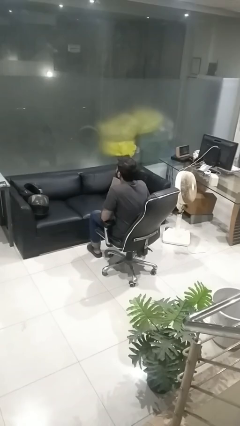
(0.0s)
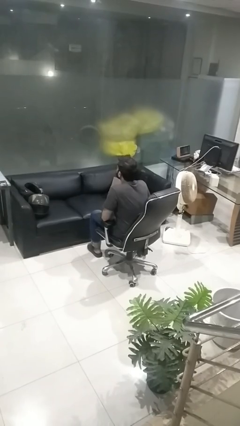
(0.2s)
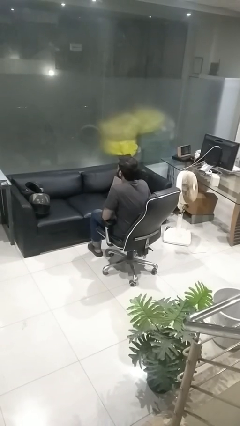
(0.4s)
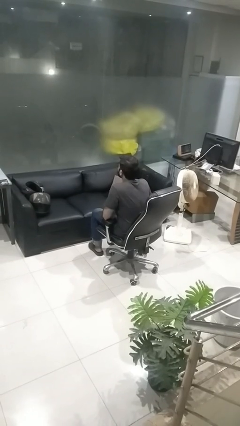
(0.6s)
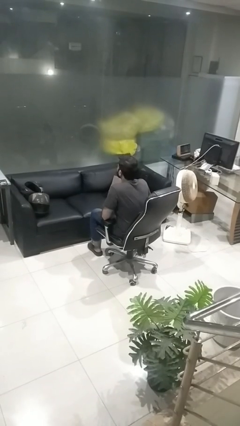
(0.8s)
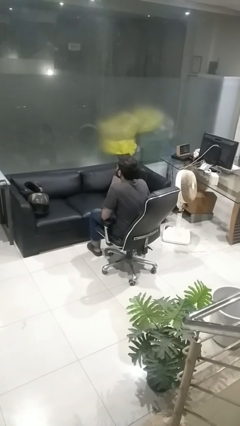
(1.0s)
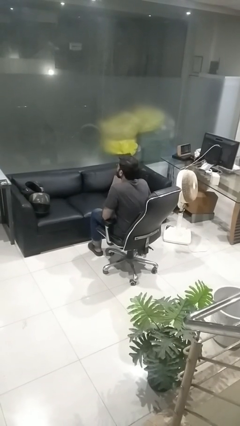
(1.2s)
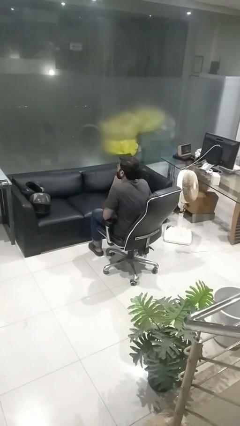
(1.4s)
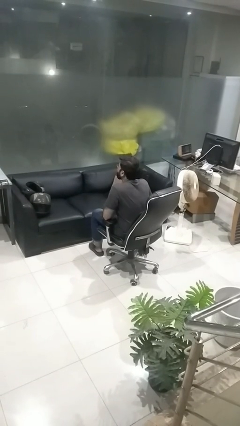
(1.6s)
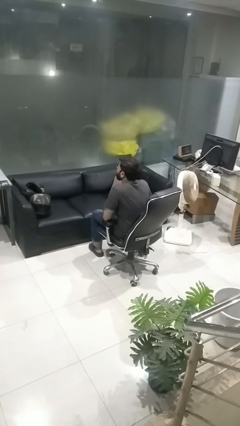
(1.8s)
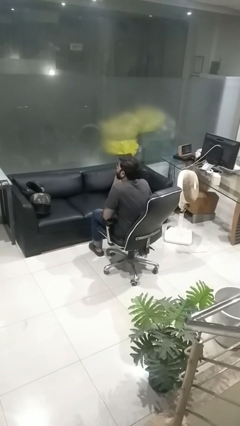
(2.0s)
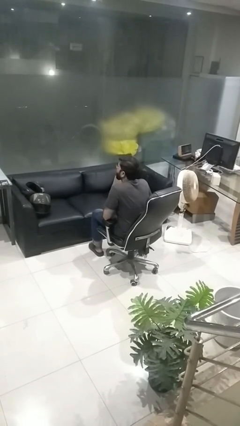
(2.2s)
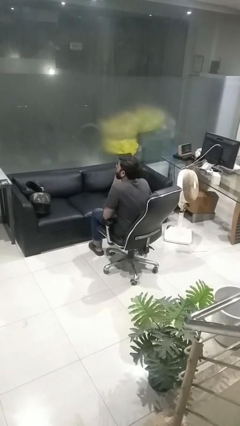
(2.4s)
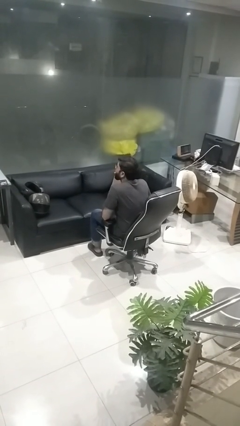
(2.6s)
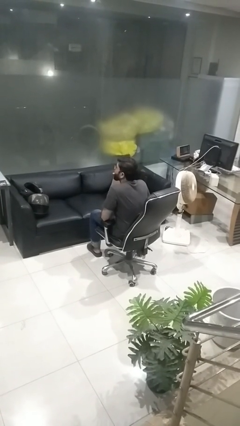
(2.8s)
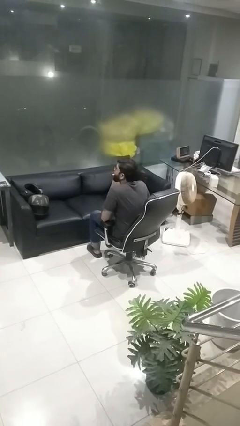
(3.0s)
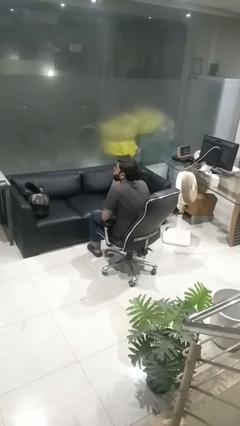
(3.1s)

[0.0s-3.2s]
person sticks out tongue

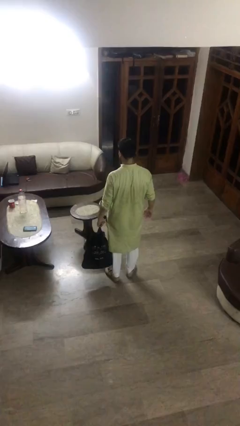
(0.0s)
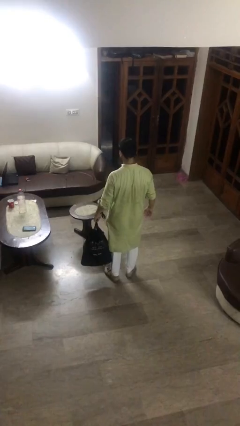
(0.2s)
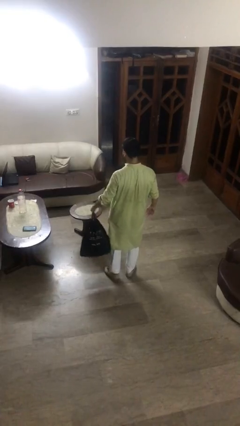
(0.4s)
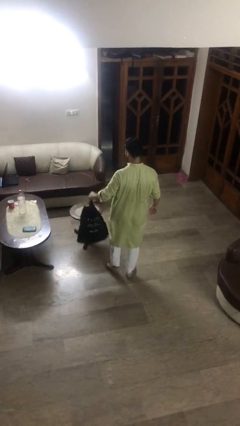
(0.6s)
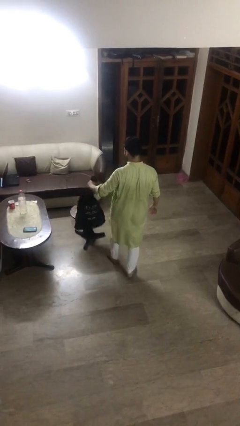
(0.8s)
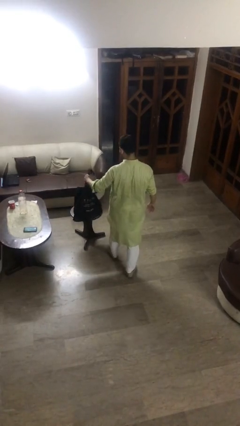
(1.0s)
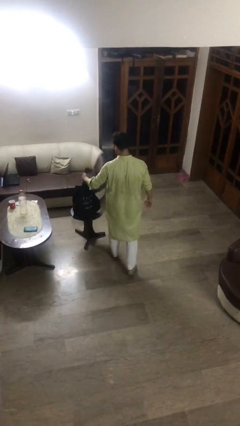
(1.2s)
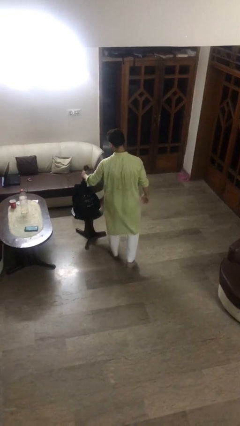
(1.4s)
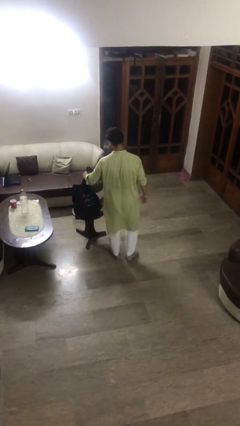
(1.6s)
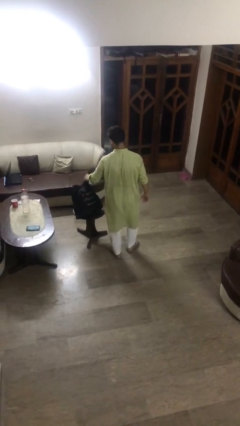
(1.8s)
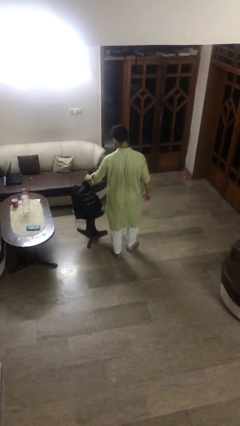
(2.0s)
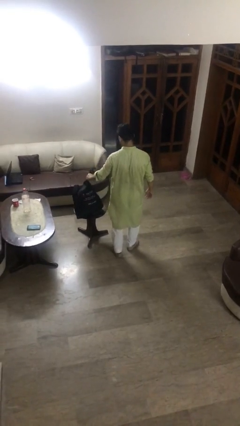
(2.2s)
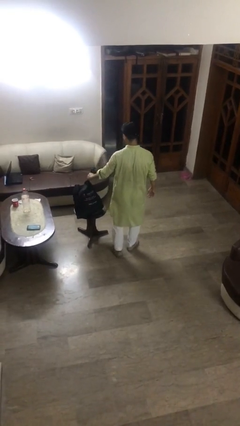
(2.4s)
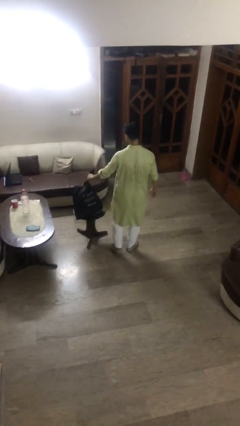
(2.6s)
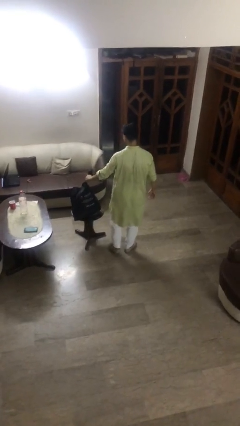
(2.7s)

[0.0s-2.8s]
person puts down object on table

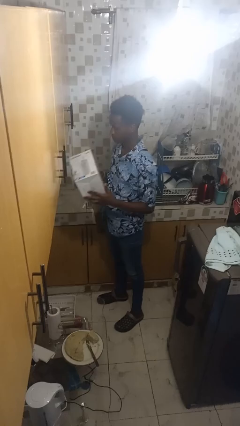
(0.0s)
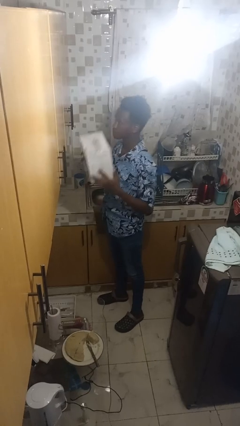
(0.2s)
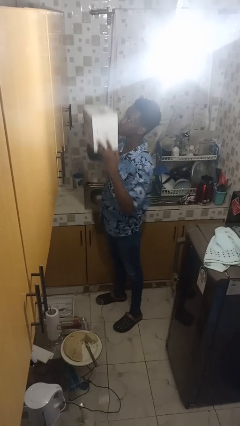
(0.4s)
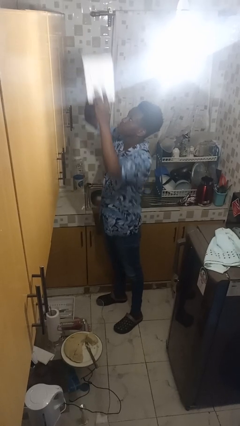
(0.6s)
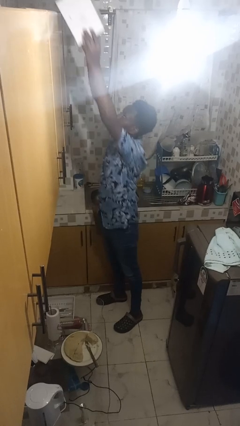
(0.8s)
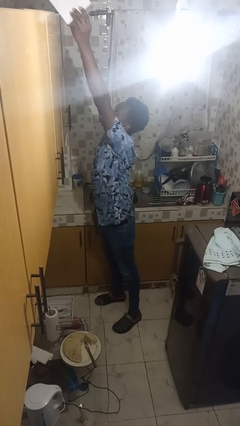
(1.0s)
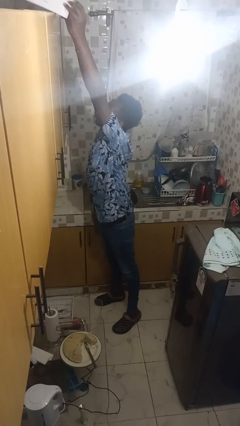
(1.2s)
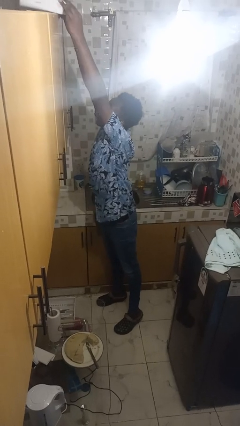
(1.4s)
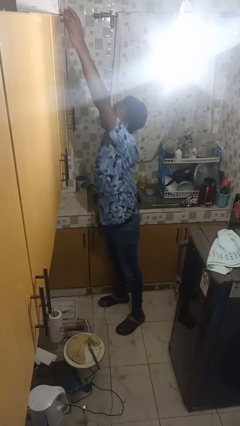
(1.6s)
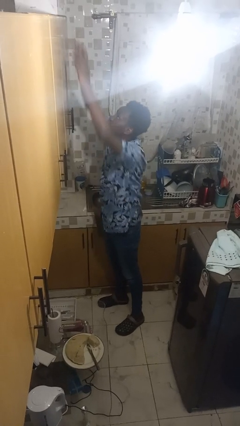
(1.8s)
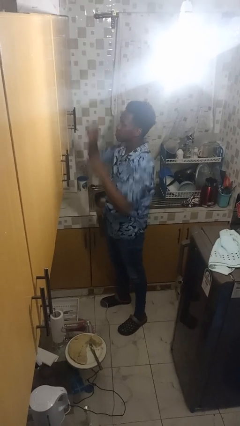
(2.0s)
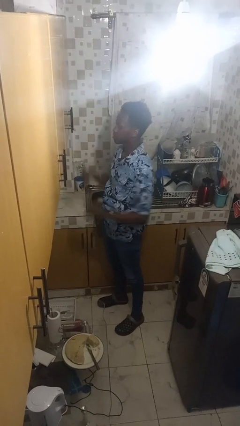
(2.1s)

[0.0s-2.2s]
person puts down object on shelf

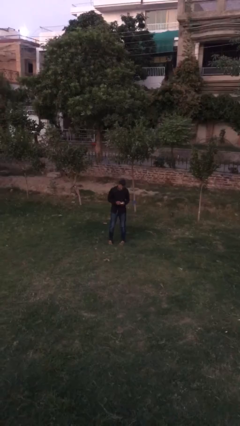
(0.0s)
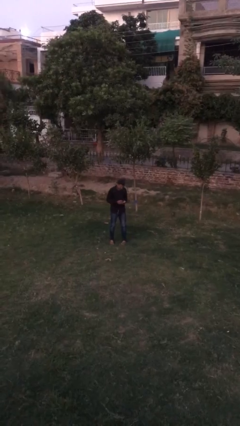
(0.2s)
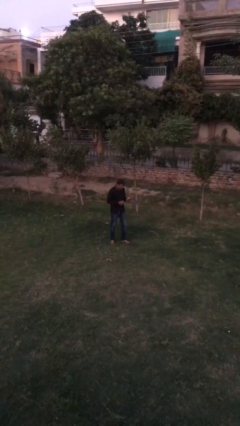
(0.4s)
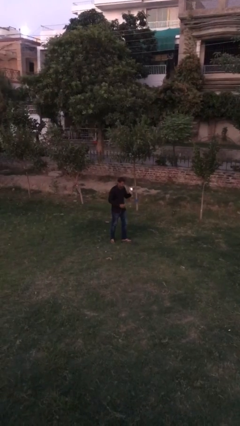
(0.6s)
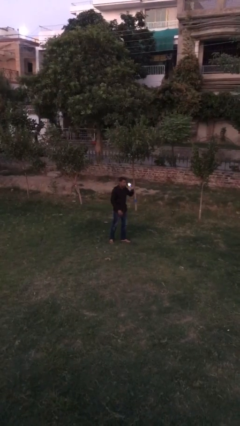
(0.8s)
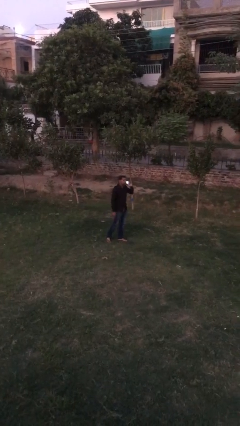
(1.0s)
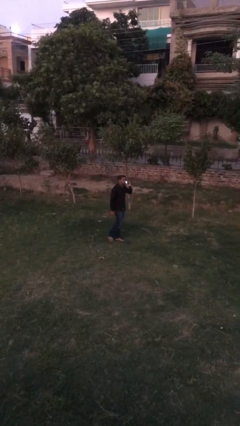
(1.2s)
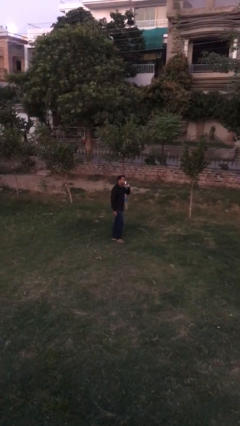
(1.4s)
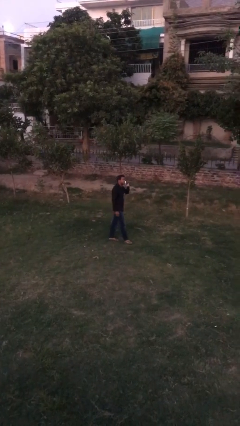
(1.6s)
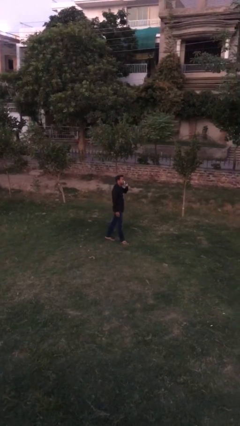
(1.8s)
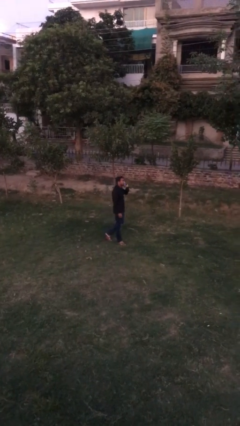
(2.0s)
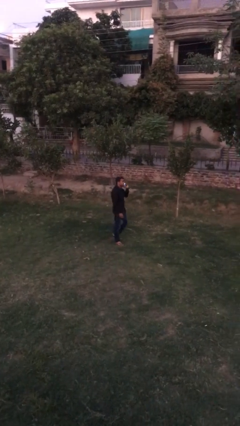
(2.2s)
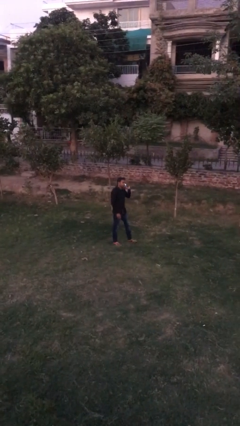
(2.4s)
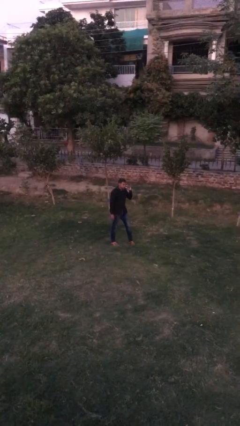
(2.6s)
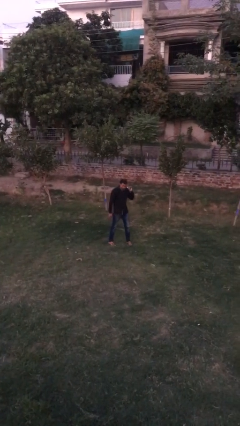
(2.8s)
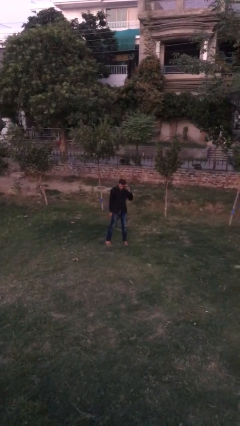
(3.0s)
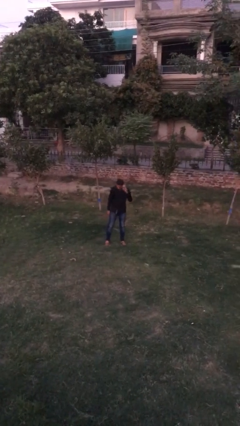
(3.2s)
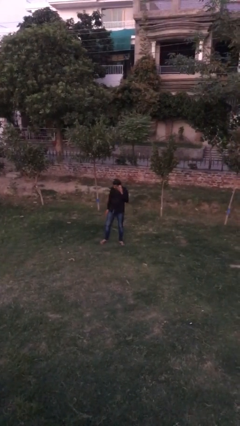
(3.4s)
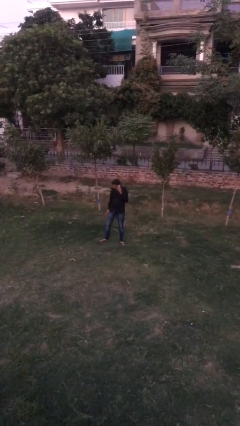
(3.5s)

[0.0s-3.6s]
person talks on phone

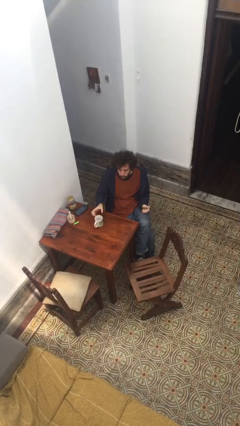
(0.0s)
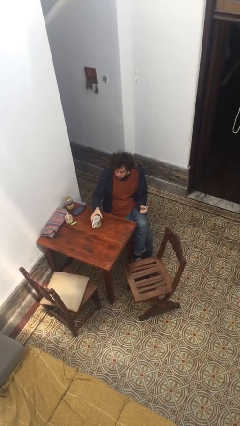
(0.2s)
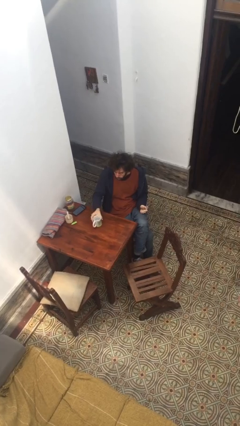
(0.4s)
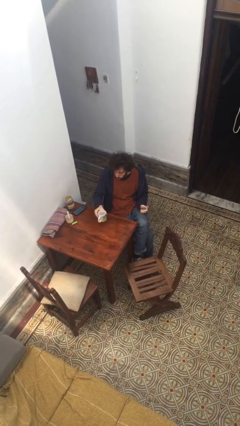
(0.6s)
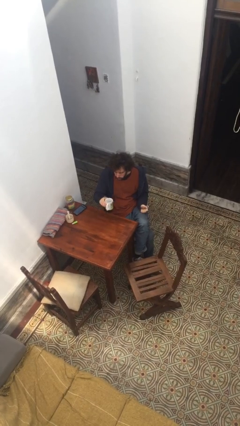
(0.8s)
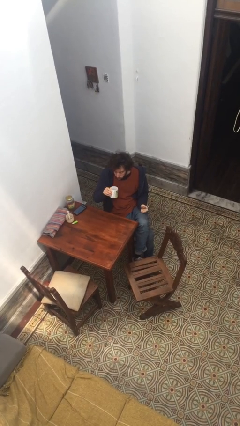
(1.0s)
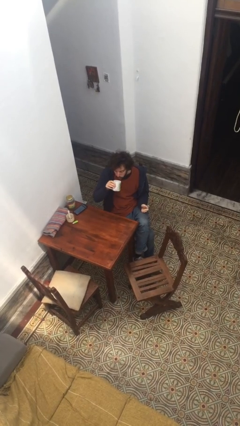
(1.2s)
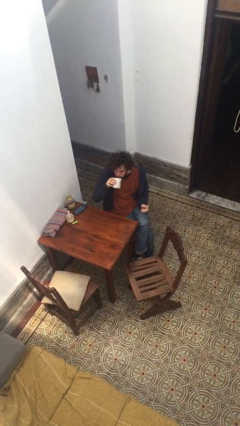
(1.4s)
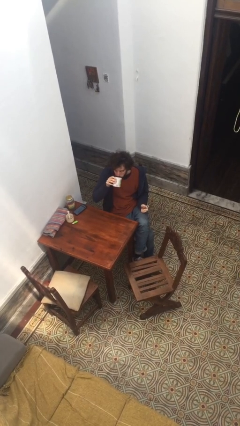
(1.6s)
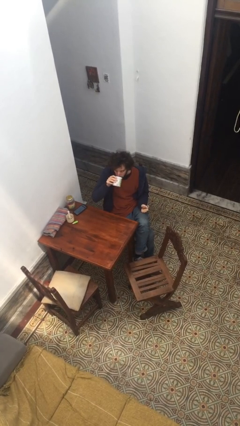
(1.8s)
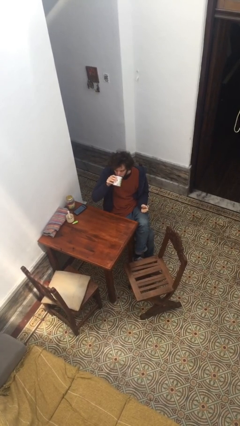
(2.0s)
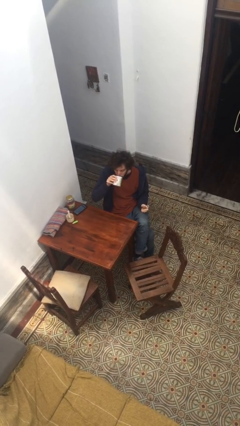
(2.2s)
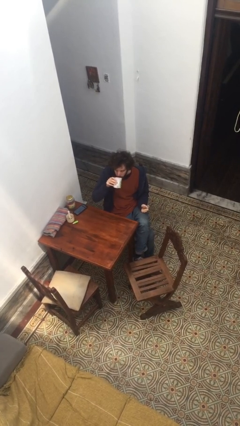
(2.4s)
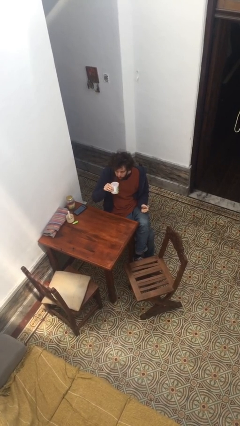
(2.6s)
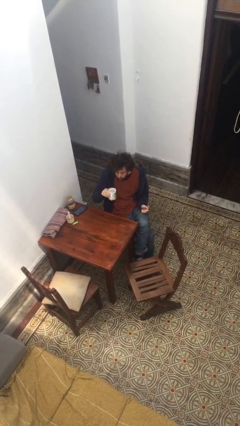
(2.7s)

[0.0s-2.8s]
person drinks from cup

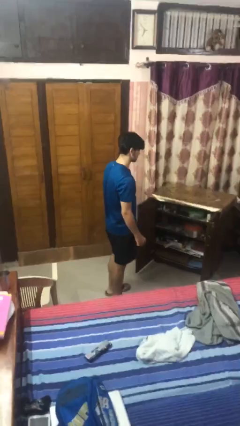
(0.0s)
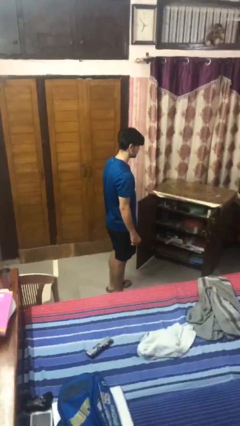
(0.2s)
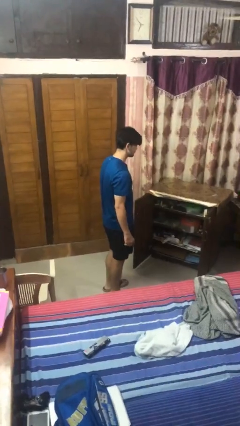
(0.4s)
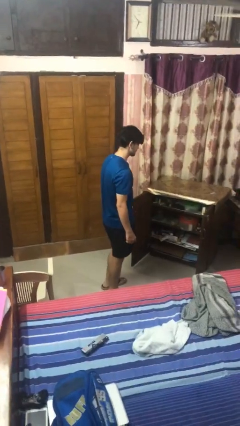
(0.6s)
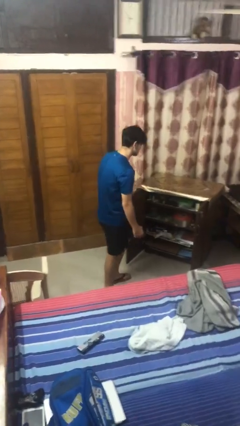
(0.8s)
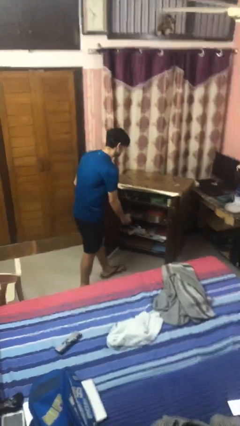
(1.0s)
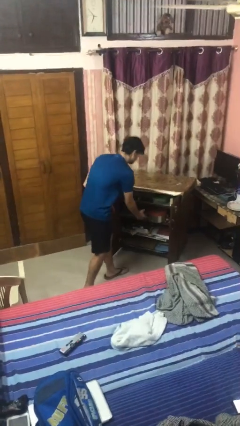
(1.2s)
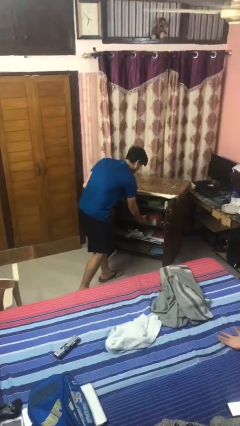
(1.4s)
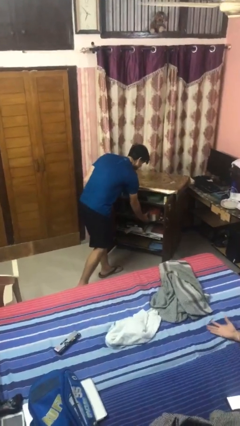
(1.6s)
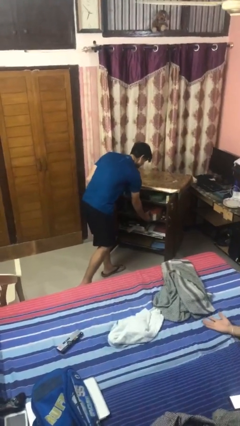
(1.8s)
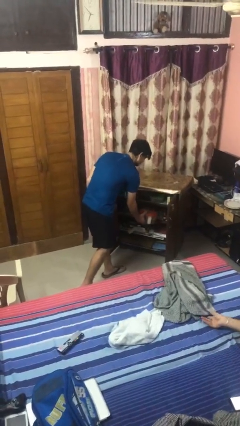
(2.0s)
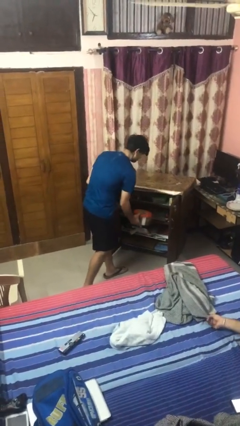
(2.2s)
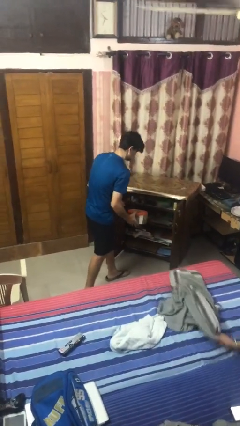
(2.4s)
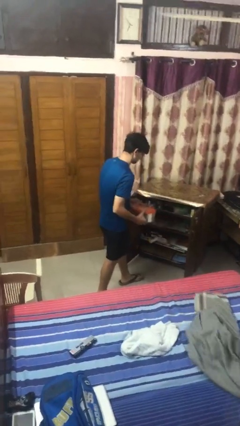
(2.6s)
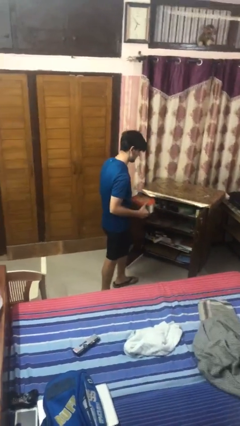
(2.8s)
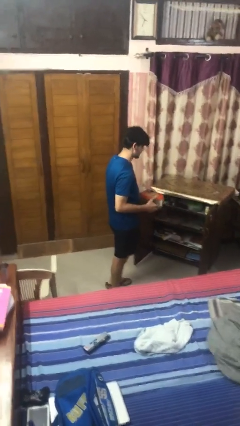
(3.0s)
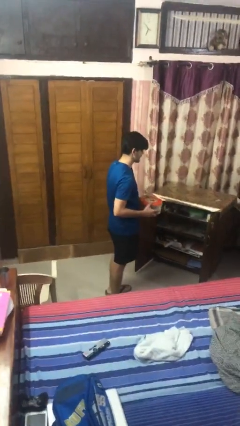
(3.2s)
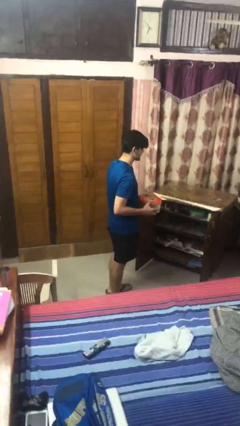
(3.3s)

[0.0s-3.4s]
person picks up object from cabinet
